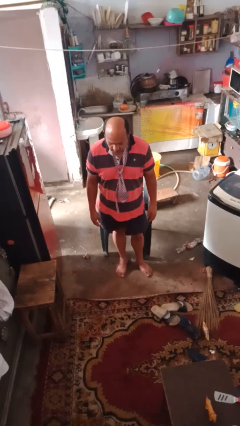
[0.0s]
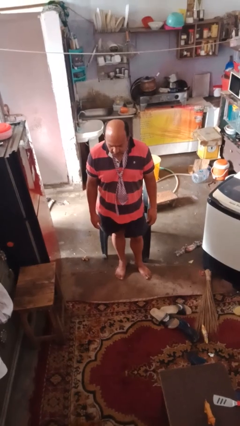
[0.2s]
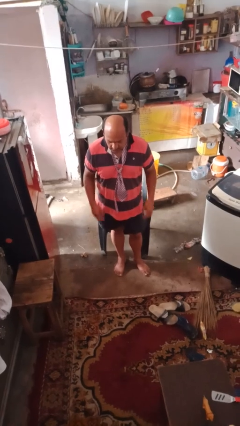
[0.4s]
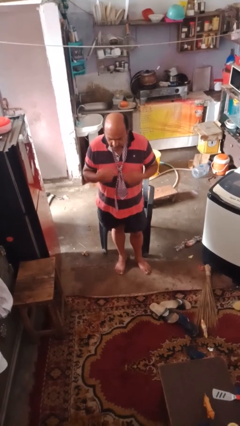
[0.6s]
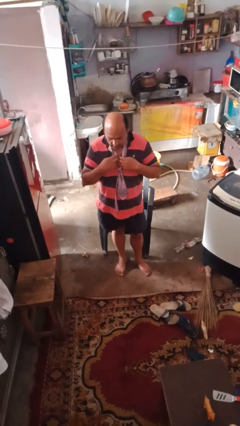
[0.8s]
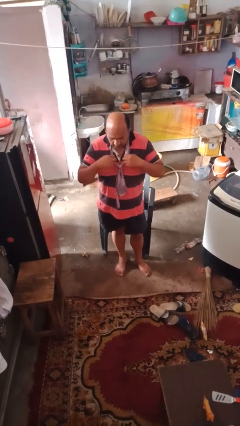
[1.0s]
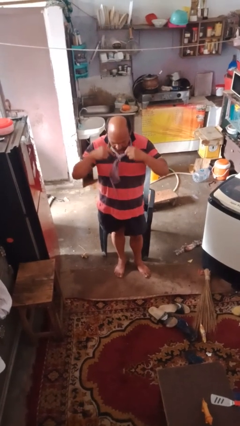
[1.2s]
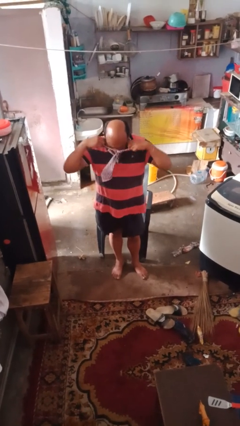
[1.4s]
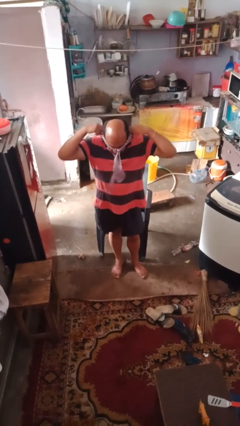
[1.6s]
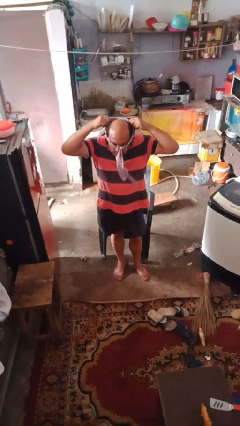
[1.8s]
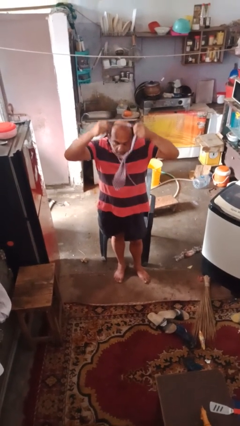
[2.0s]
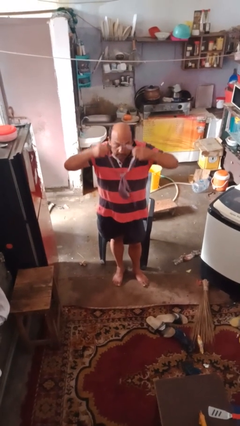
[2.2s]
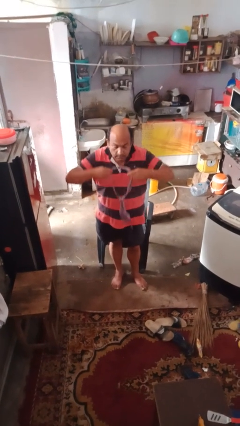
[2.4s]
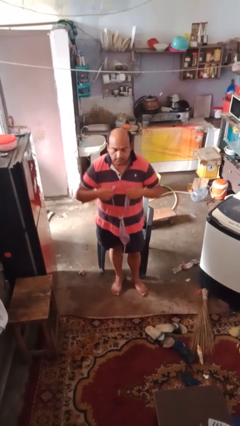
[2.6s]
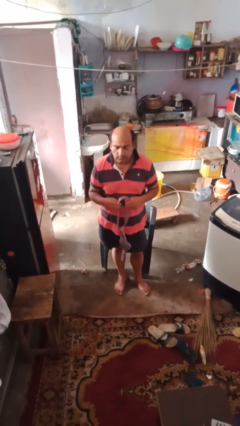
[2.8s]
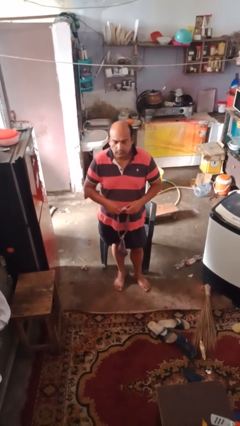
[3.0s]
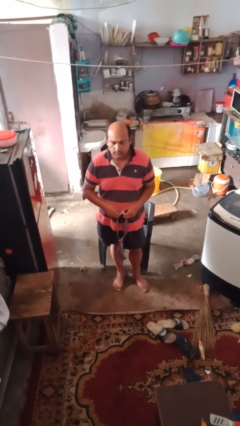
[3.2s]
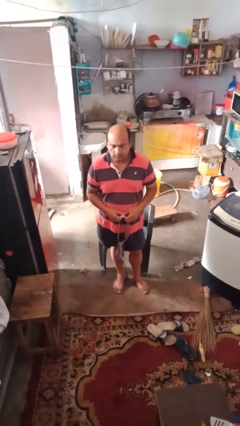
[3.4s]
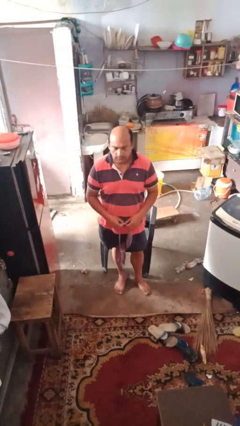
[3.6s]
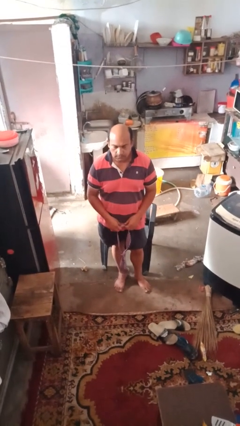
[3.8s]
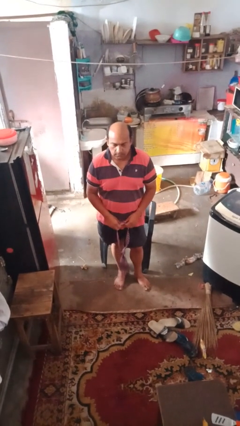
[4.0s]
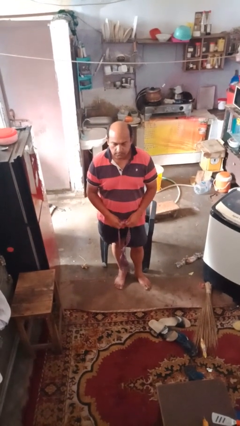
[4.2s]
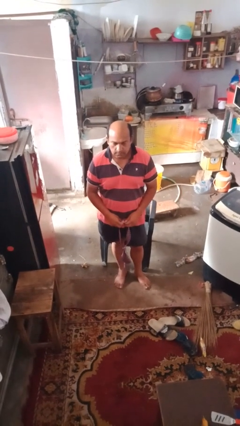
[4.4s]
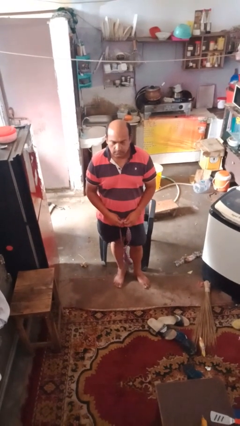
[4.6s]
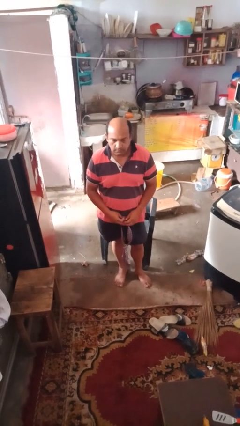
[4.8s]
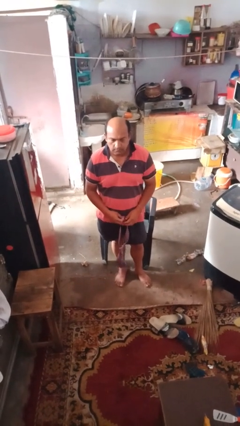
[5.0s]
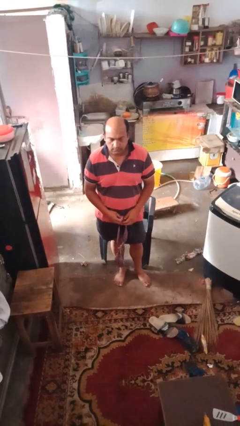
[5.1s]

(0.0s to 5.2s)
person takes off necktie

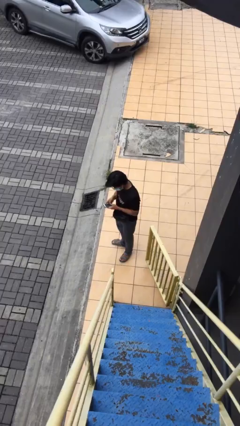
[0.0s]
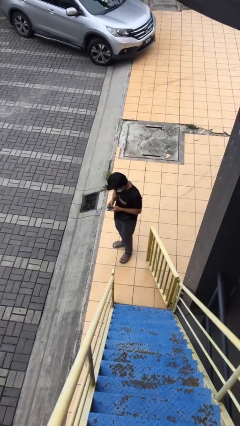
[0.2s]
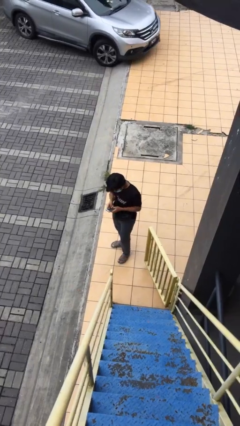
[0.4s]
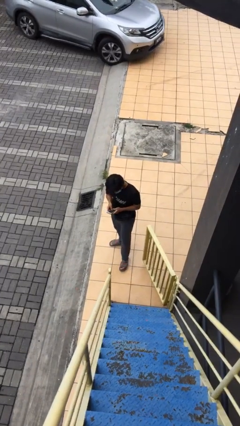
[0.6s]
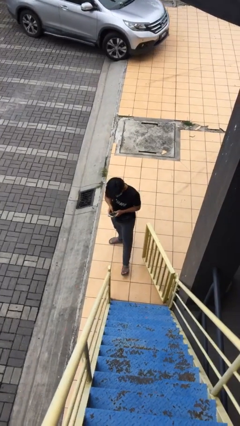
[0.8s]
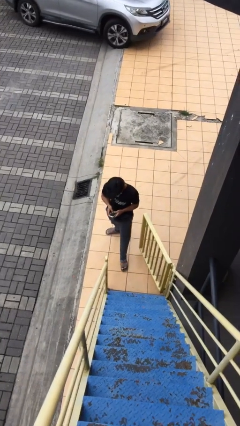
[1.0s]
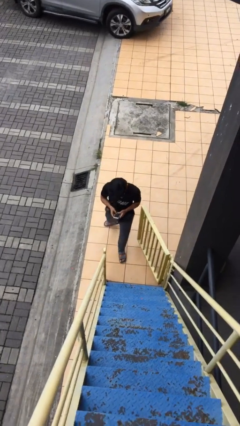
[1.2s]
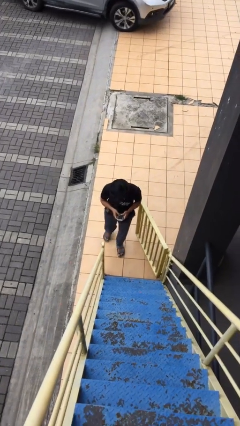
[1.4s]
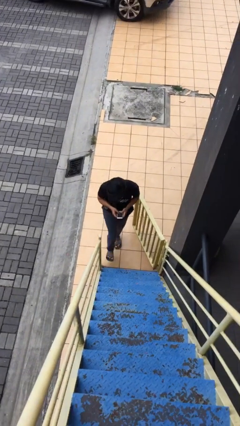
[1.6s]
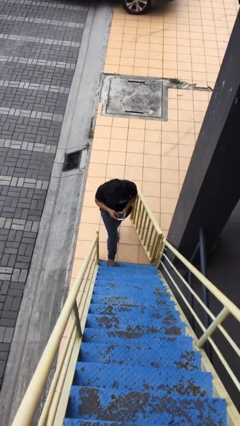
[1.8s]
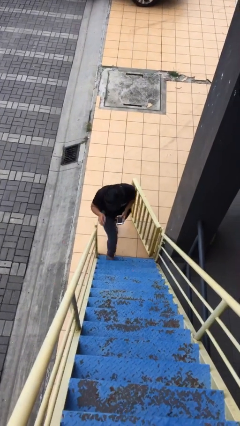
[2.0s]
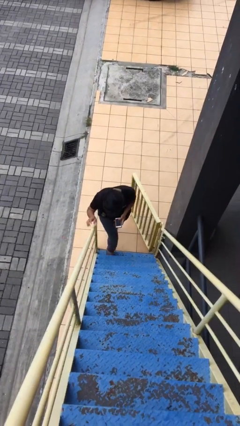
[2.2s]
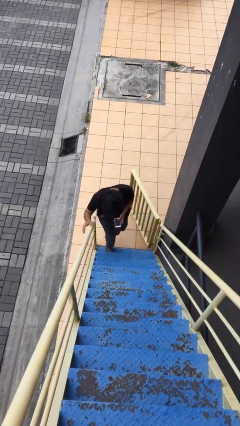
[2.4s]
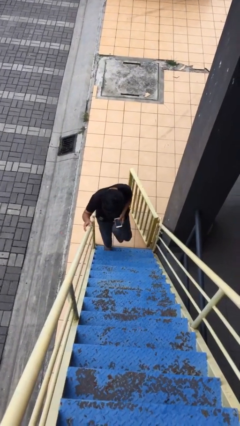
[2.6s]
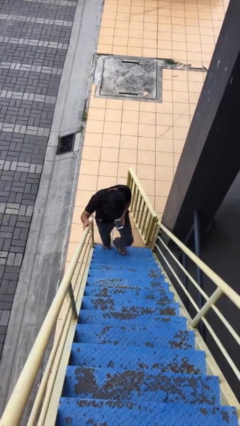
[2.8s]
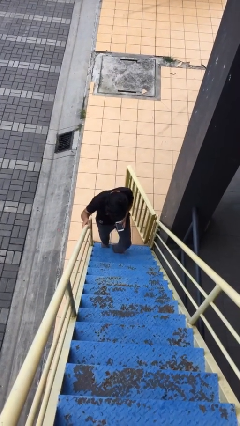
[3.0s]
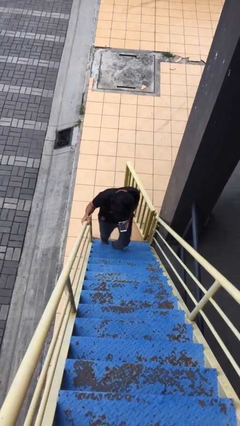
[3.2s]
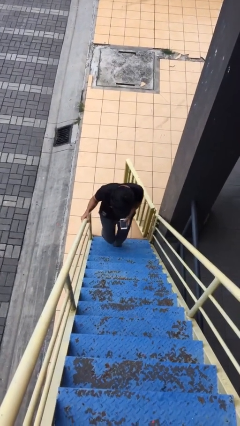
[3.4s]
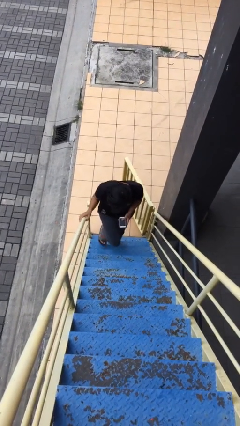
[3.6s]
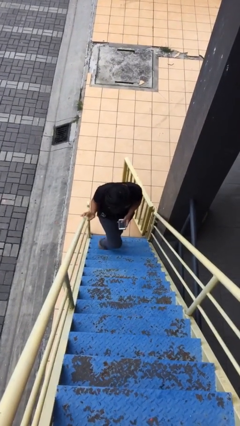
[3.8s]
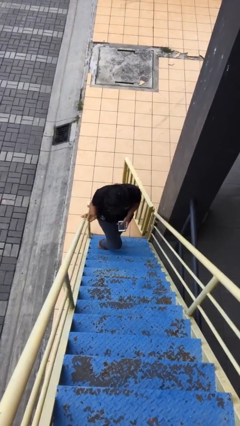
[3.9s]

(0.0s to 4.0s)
person enters scene through structure

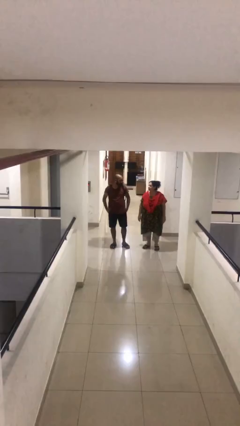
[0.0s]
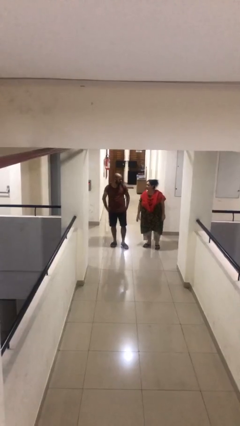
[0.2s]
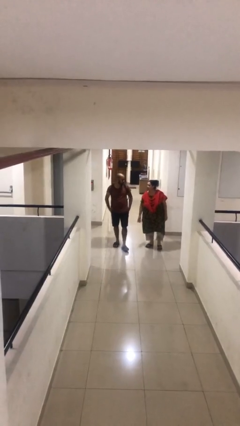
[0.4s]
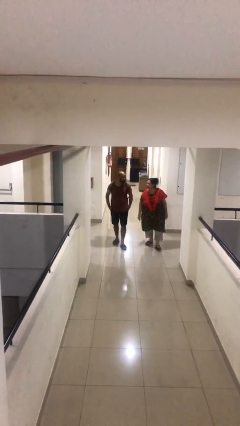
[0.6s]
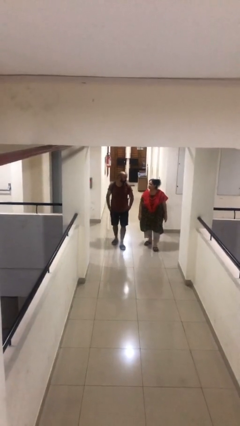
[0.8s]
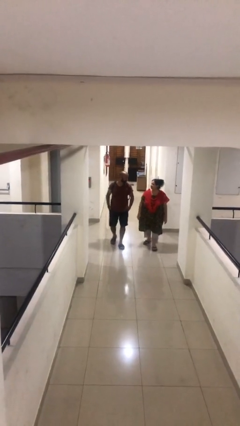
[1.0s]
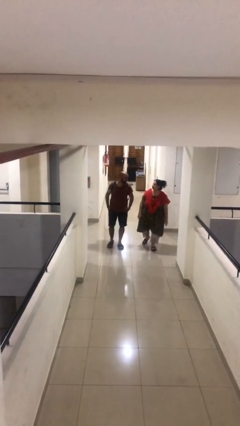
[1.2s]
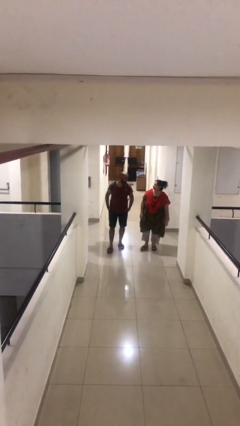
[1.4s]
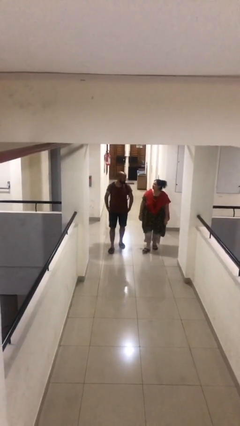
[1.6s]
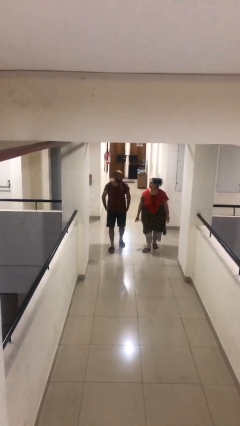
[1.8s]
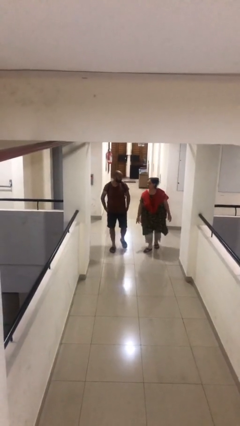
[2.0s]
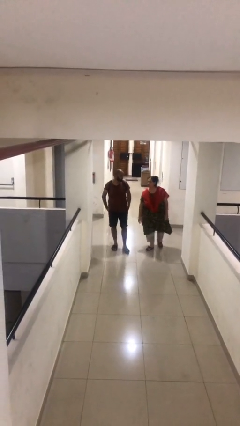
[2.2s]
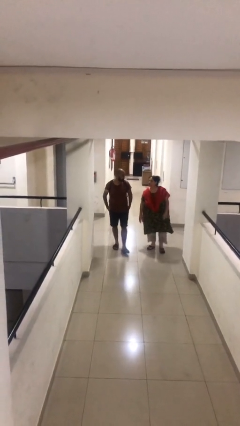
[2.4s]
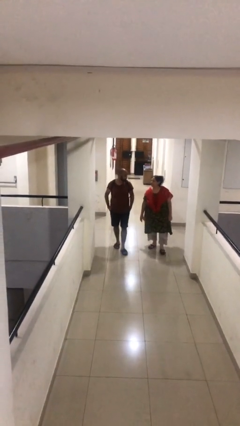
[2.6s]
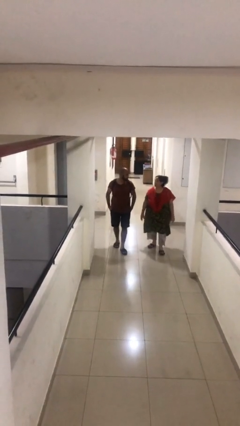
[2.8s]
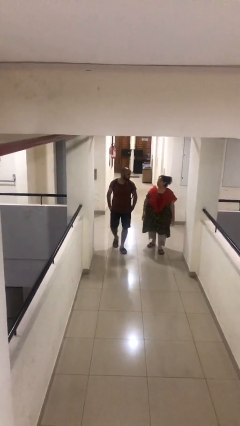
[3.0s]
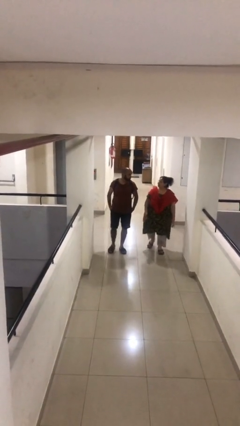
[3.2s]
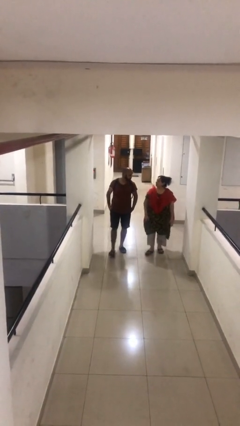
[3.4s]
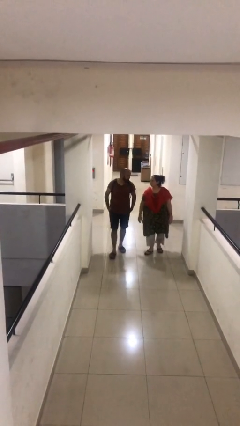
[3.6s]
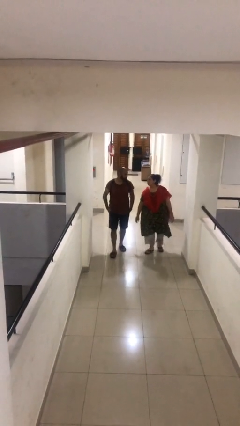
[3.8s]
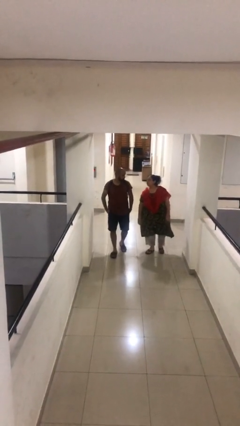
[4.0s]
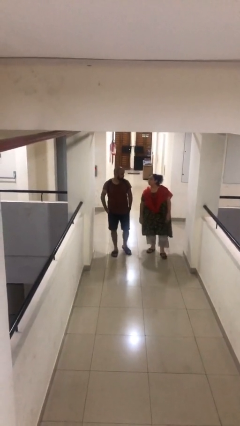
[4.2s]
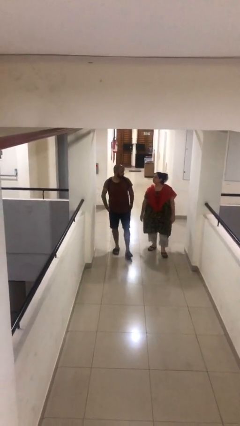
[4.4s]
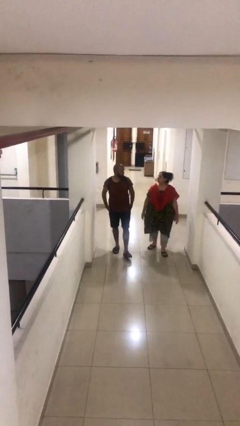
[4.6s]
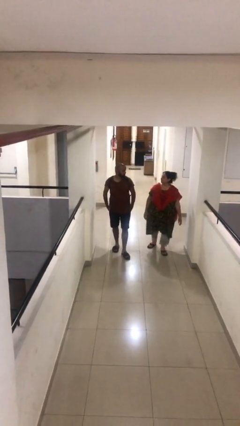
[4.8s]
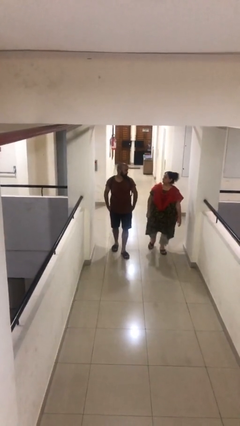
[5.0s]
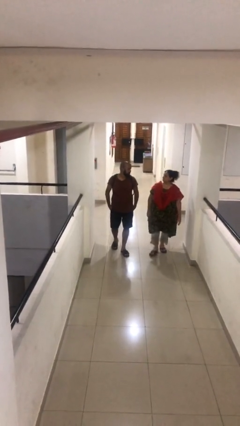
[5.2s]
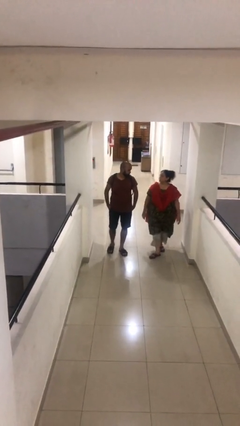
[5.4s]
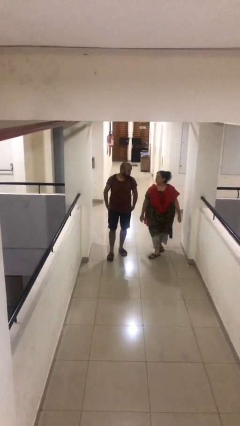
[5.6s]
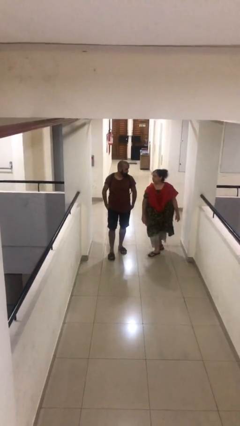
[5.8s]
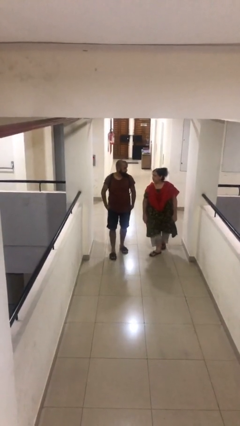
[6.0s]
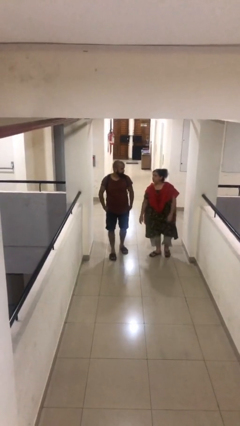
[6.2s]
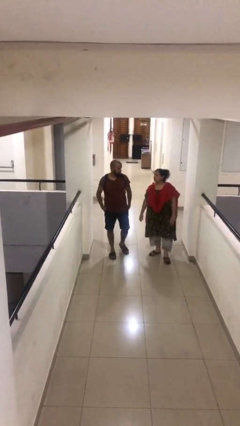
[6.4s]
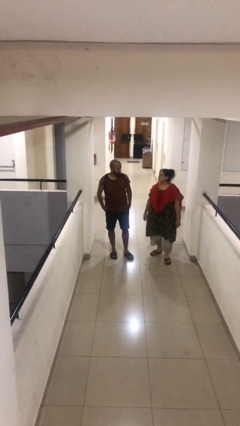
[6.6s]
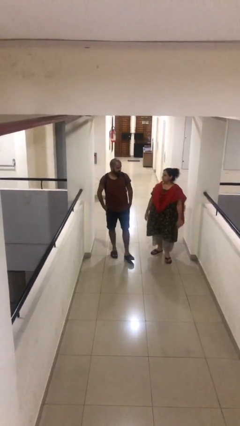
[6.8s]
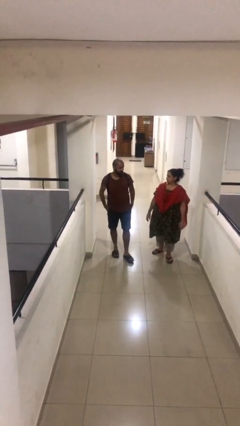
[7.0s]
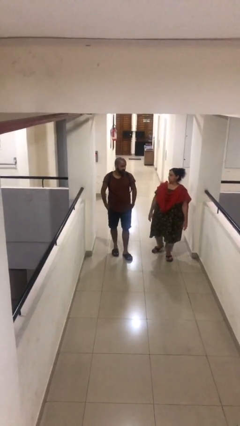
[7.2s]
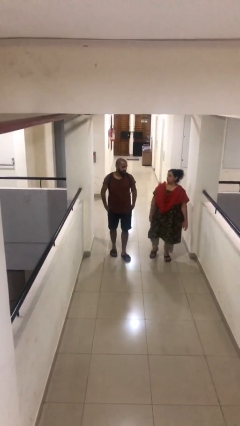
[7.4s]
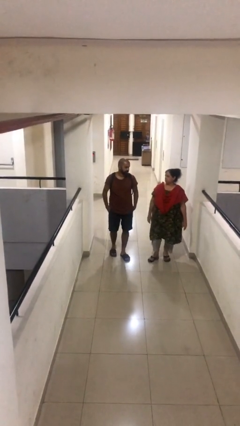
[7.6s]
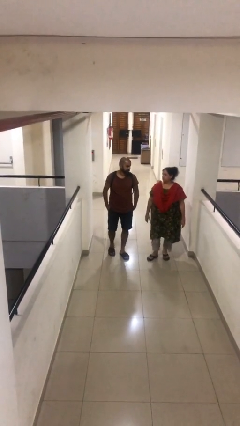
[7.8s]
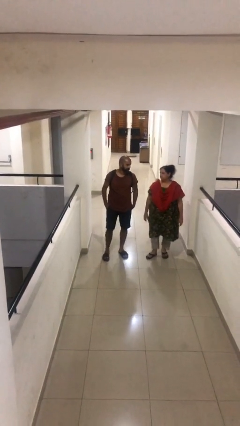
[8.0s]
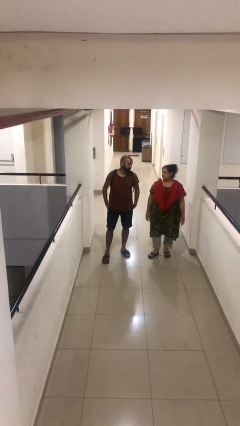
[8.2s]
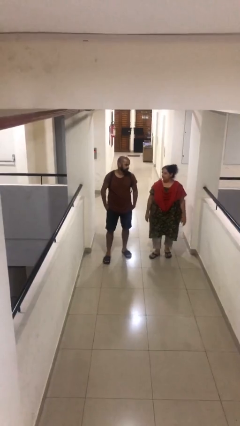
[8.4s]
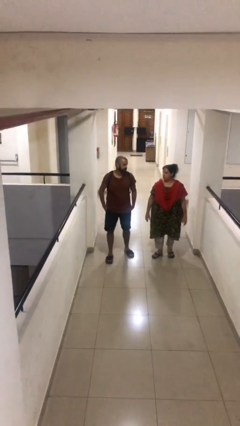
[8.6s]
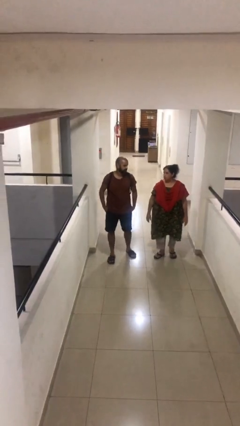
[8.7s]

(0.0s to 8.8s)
person talks to person
